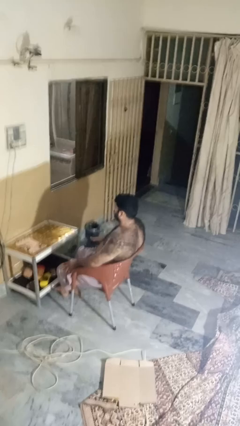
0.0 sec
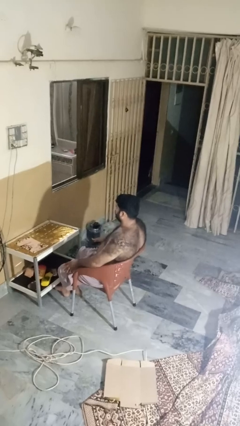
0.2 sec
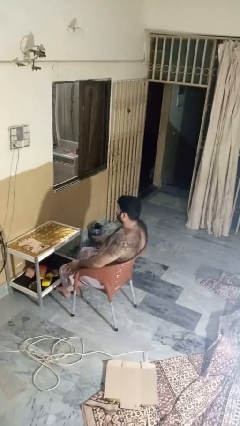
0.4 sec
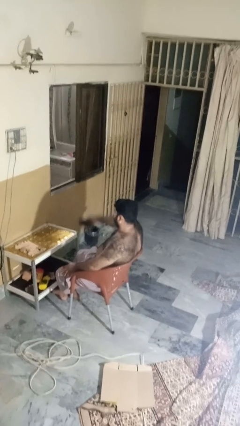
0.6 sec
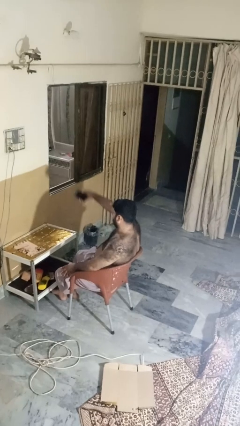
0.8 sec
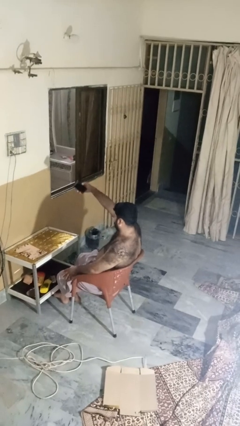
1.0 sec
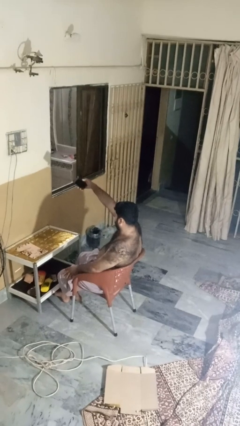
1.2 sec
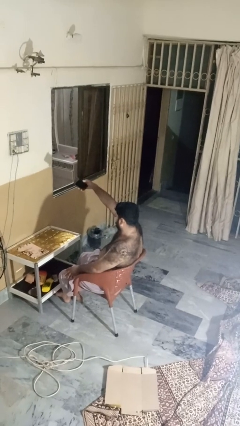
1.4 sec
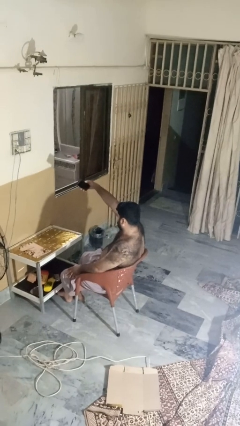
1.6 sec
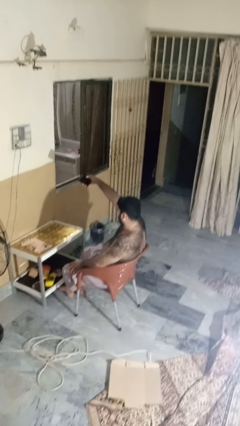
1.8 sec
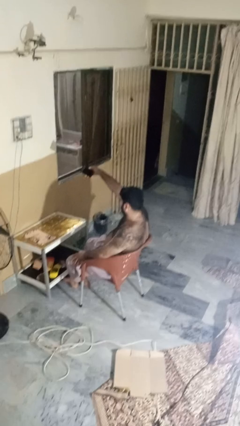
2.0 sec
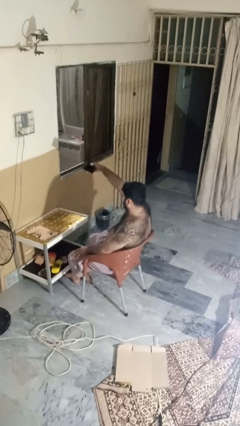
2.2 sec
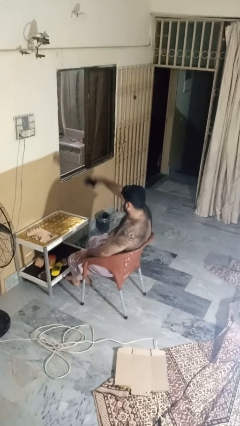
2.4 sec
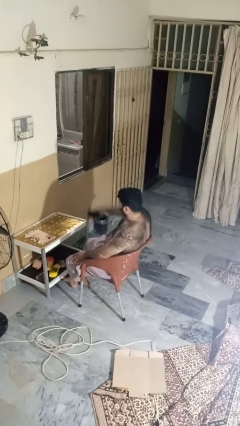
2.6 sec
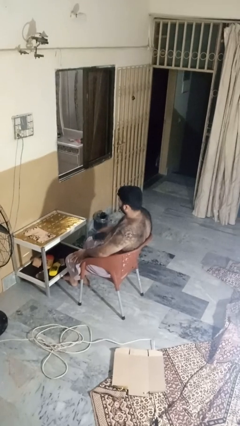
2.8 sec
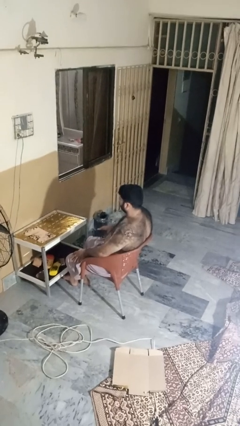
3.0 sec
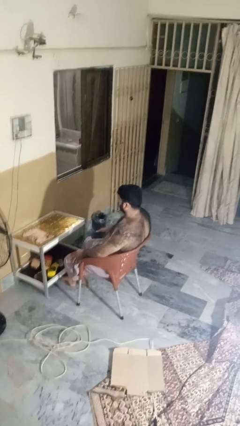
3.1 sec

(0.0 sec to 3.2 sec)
person takes selfie

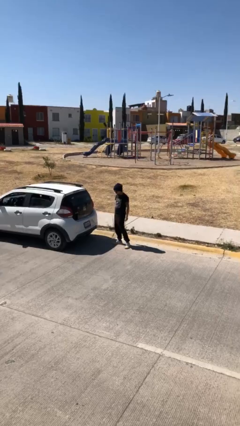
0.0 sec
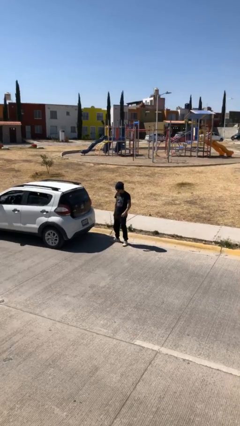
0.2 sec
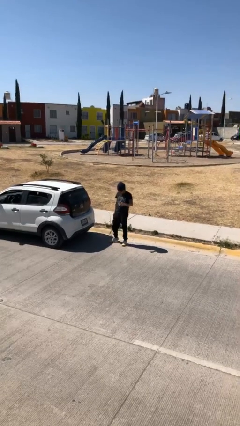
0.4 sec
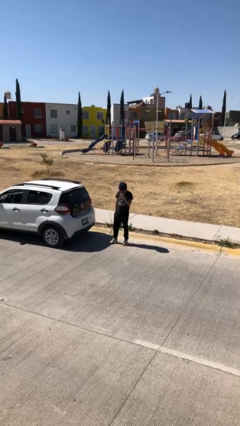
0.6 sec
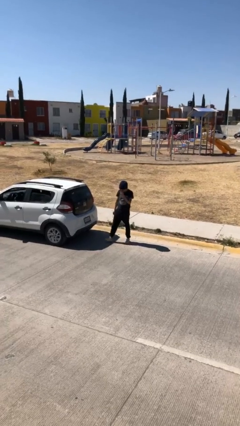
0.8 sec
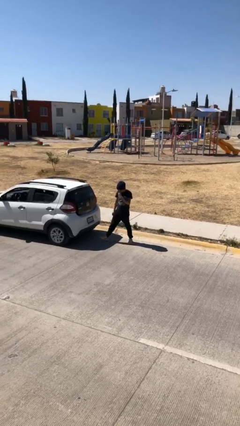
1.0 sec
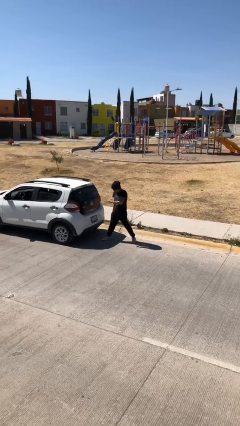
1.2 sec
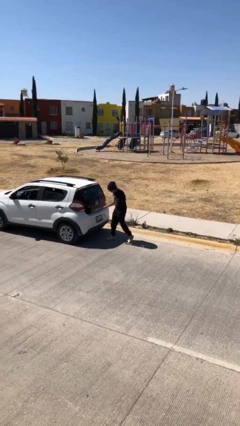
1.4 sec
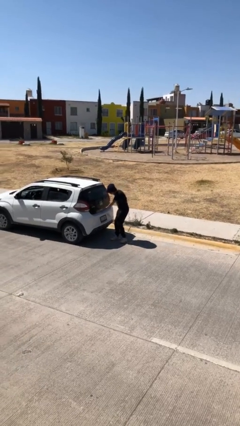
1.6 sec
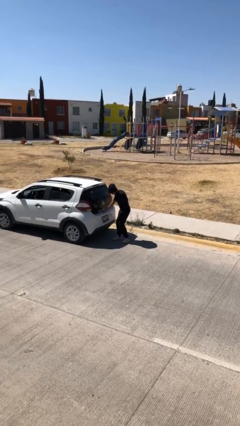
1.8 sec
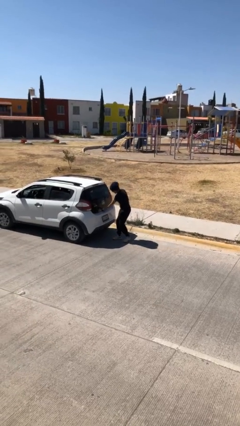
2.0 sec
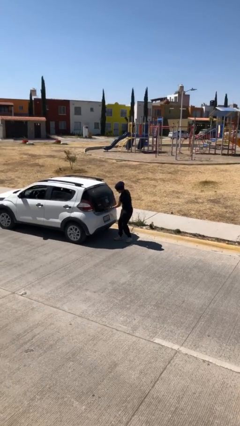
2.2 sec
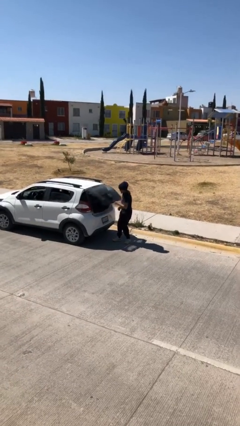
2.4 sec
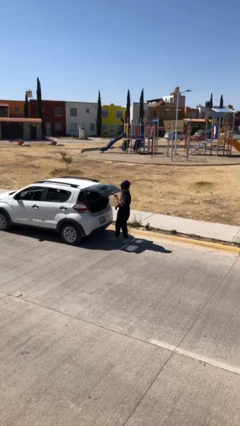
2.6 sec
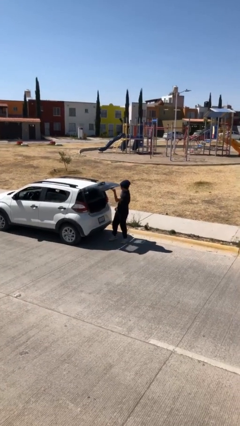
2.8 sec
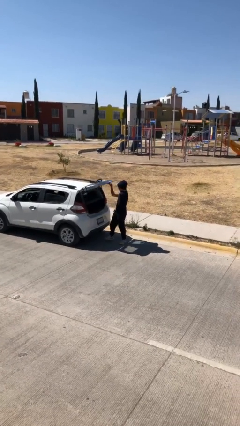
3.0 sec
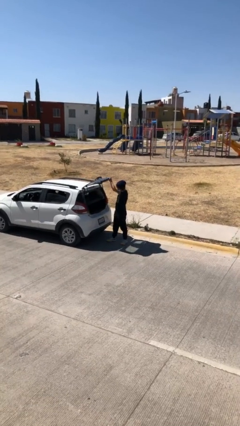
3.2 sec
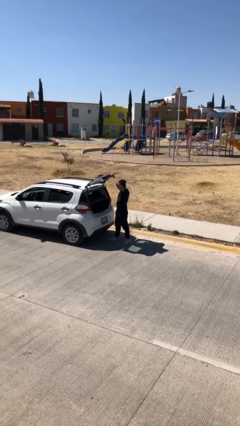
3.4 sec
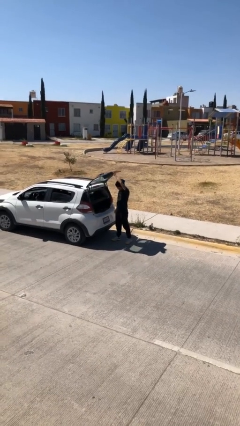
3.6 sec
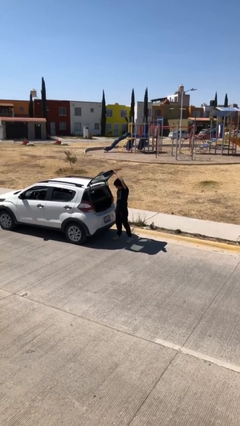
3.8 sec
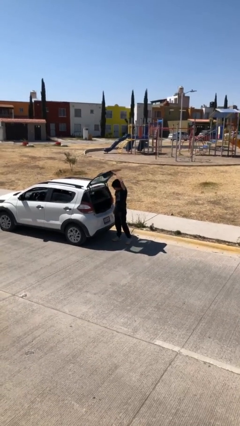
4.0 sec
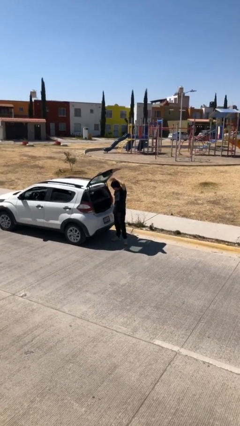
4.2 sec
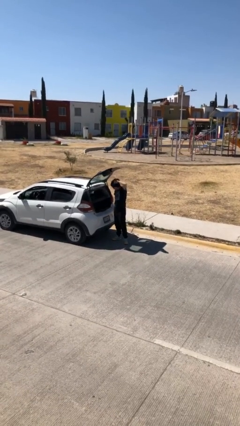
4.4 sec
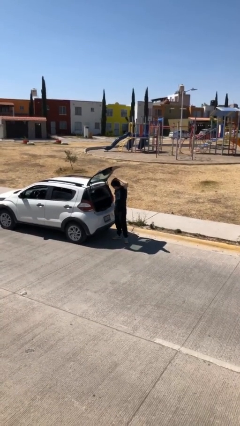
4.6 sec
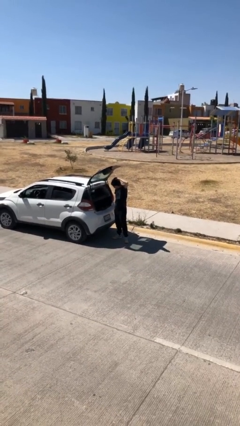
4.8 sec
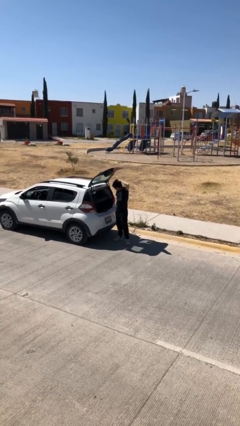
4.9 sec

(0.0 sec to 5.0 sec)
person opens car trunk

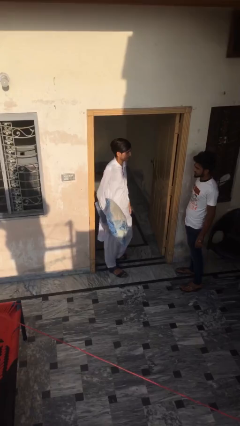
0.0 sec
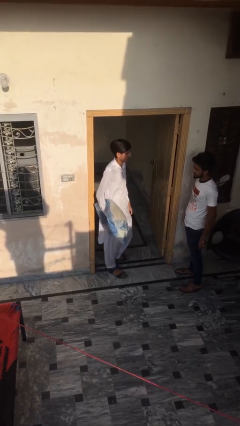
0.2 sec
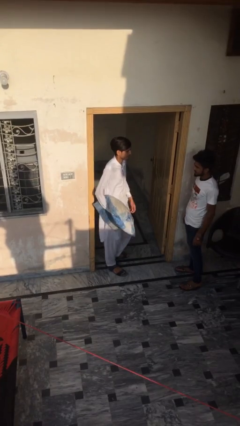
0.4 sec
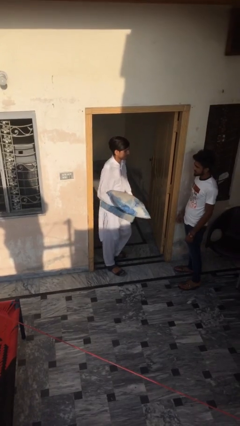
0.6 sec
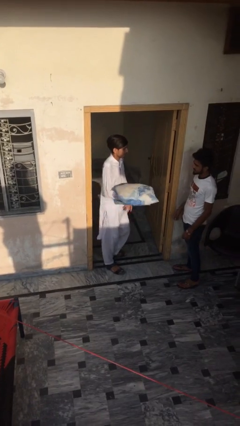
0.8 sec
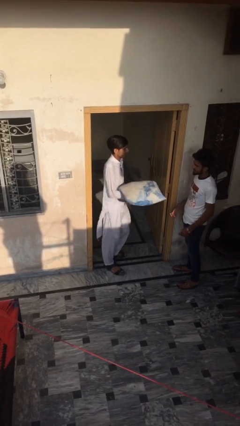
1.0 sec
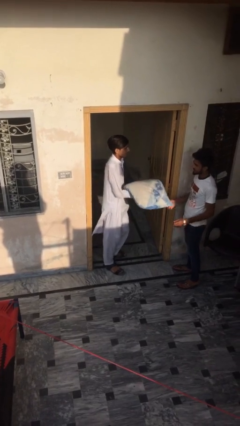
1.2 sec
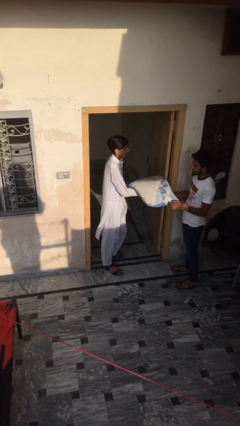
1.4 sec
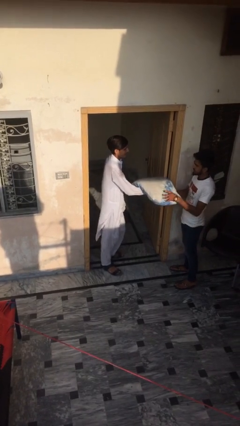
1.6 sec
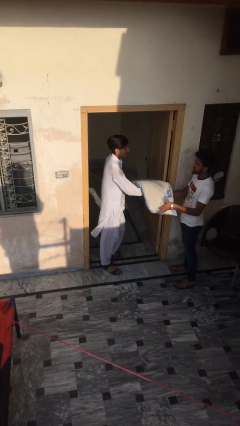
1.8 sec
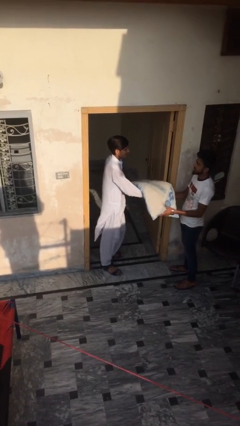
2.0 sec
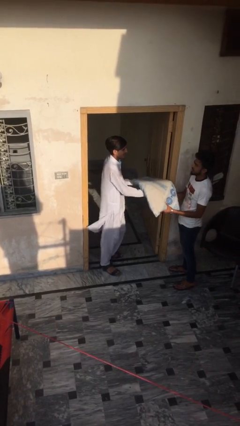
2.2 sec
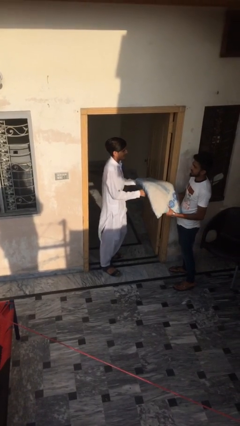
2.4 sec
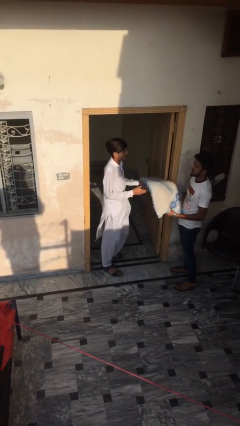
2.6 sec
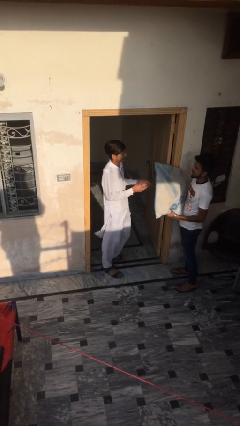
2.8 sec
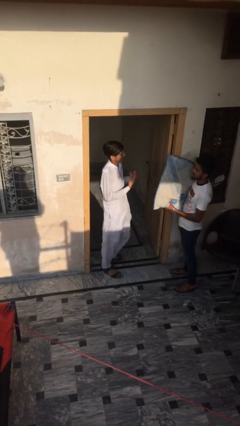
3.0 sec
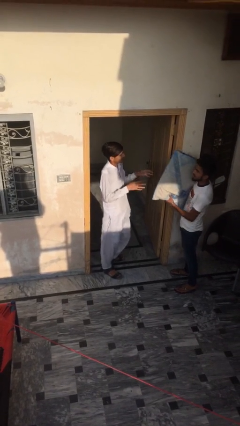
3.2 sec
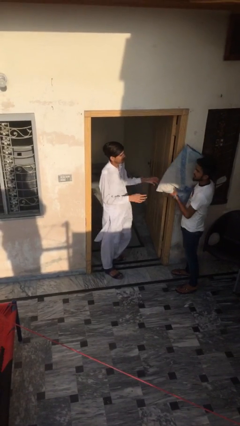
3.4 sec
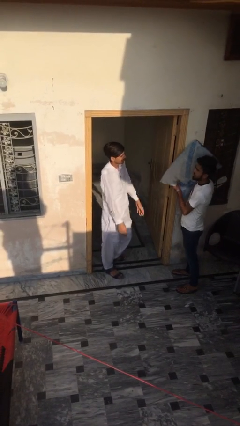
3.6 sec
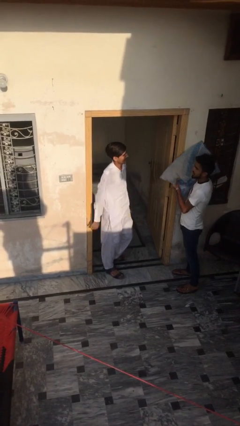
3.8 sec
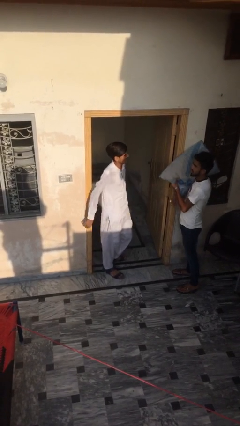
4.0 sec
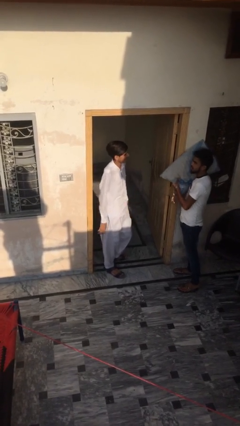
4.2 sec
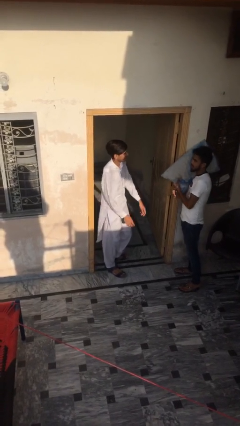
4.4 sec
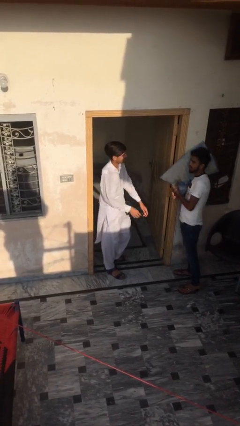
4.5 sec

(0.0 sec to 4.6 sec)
person transfers object to person

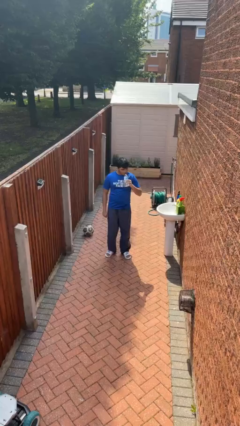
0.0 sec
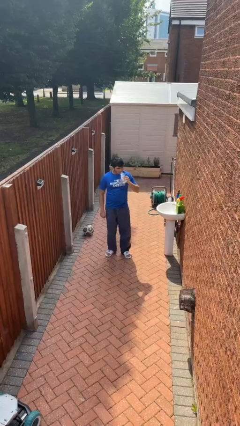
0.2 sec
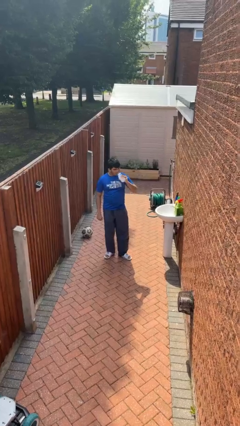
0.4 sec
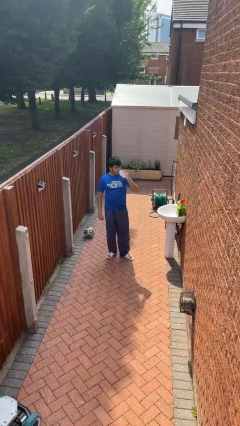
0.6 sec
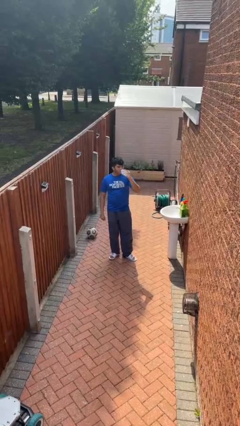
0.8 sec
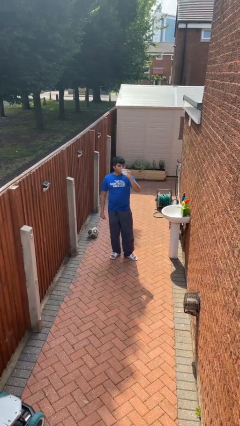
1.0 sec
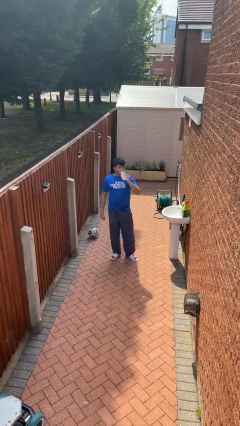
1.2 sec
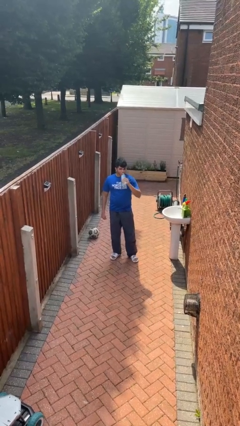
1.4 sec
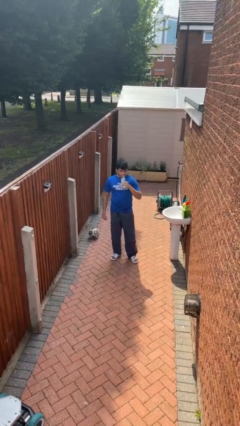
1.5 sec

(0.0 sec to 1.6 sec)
person drinks from bottle

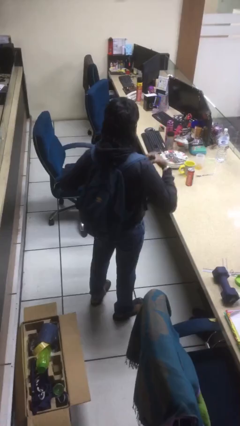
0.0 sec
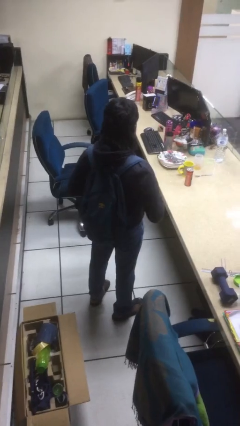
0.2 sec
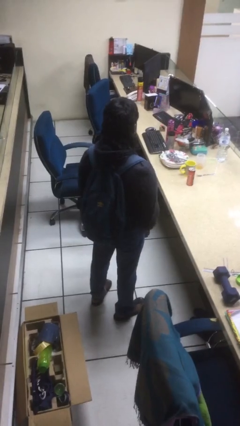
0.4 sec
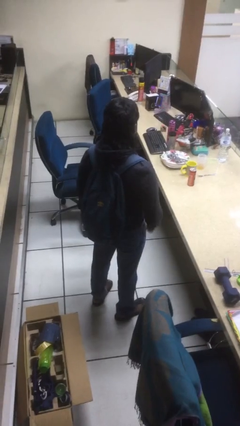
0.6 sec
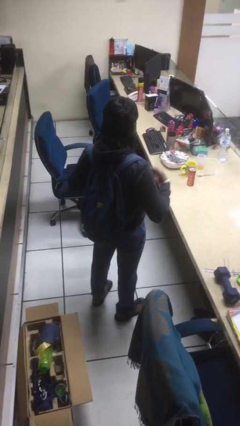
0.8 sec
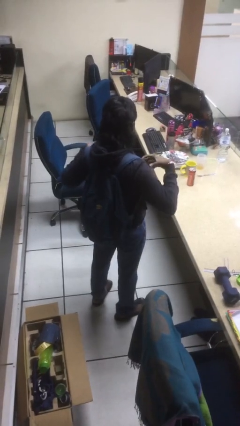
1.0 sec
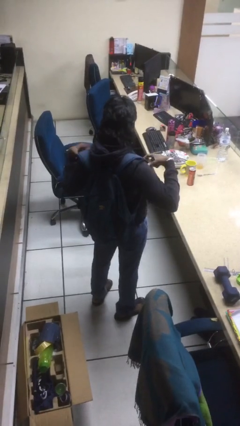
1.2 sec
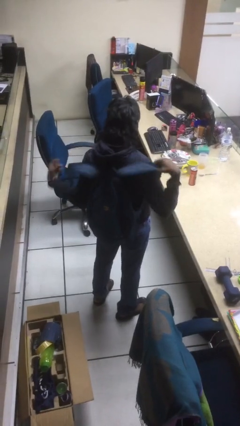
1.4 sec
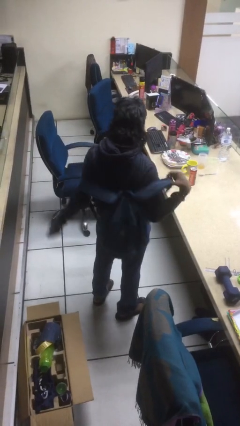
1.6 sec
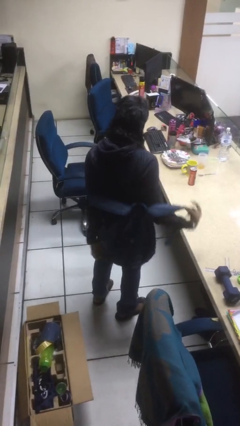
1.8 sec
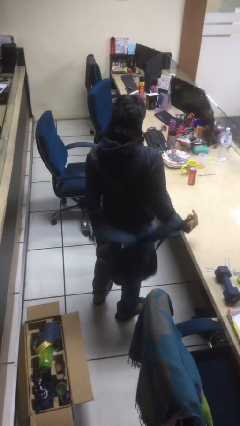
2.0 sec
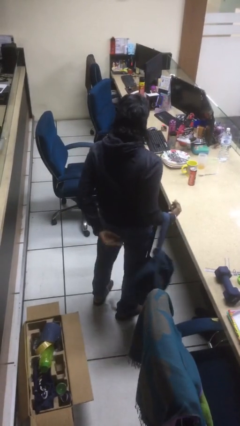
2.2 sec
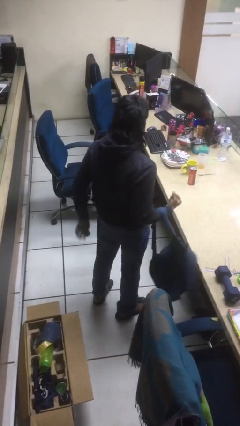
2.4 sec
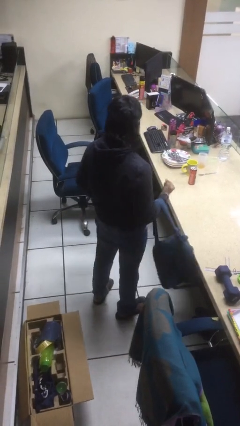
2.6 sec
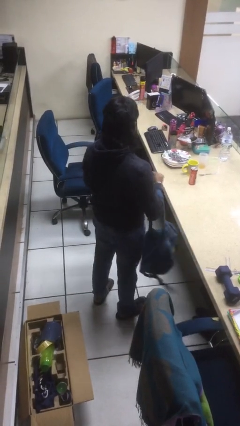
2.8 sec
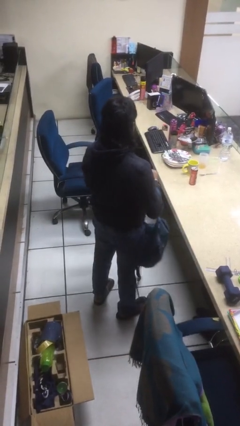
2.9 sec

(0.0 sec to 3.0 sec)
person takes off backpack
